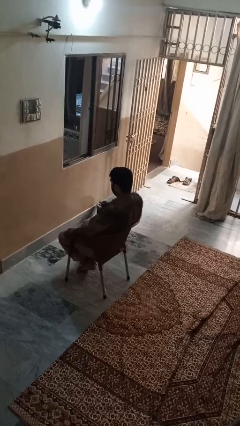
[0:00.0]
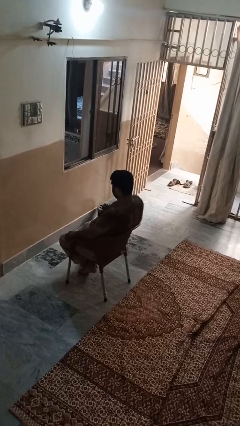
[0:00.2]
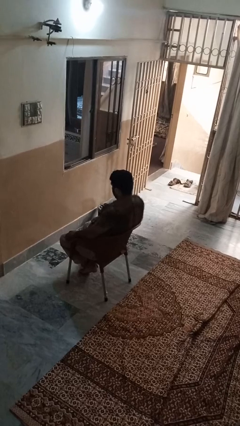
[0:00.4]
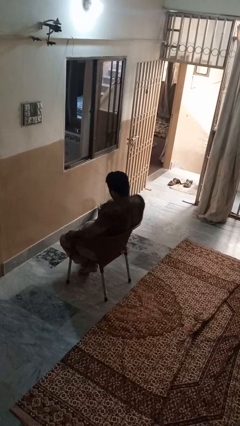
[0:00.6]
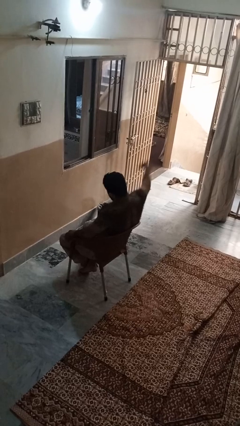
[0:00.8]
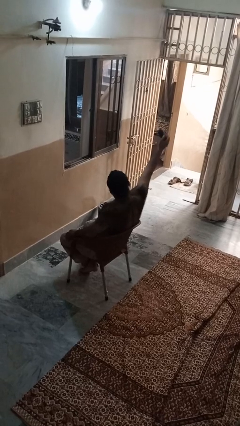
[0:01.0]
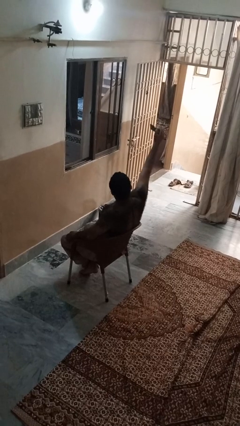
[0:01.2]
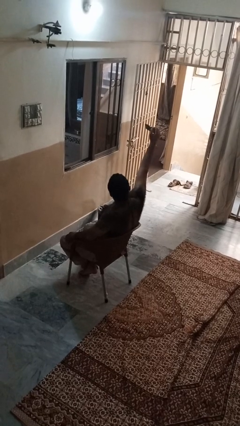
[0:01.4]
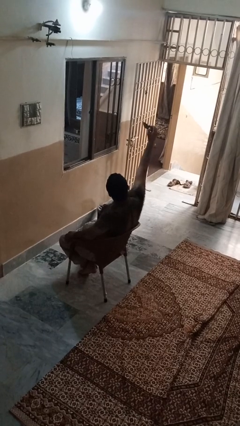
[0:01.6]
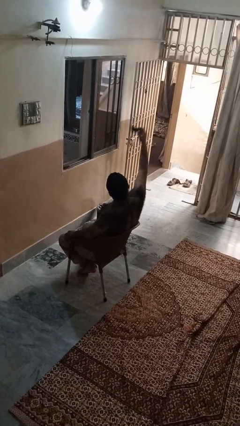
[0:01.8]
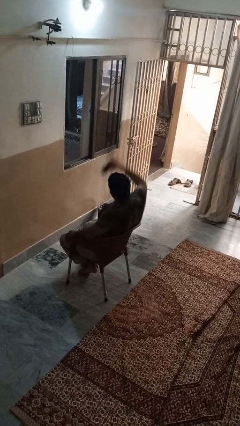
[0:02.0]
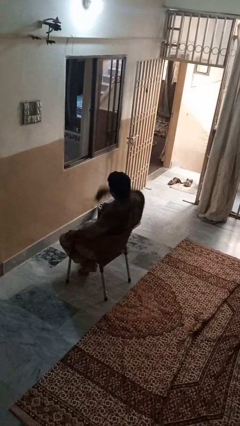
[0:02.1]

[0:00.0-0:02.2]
person takes selfie

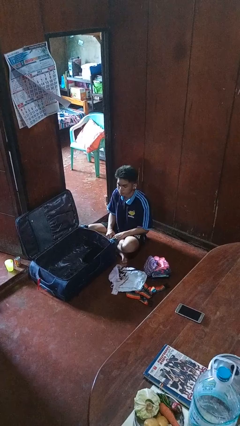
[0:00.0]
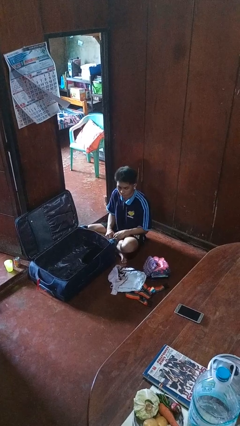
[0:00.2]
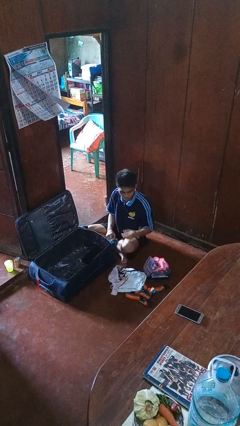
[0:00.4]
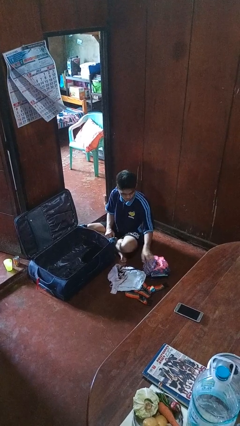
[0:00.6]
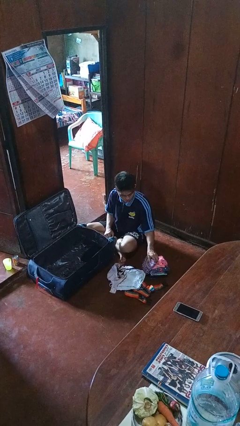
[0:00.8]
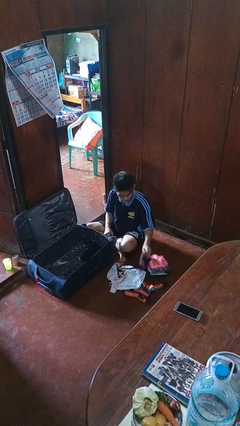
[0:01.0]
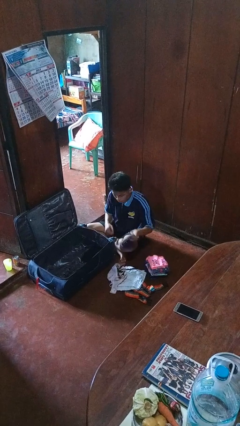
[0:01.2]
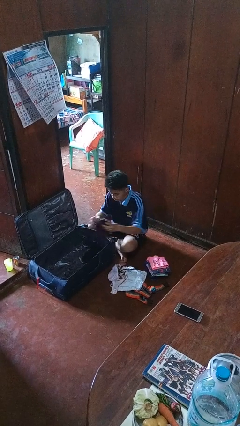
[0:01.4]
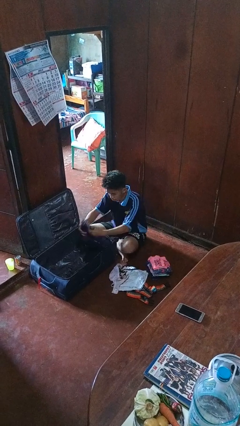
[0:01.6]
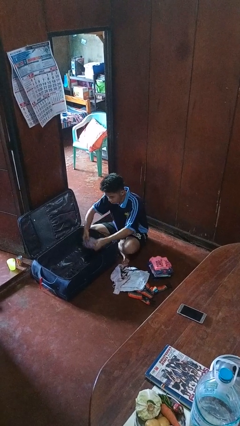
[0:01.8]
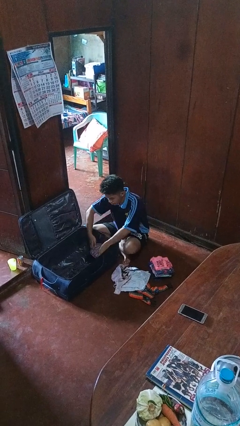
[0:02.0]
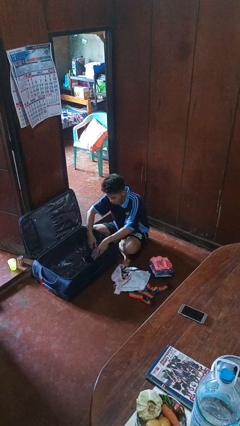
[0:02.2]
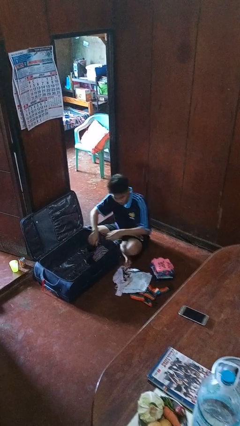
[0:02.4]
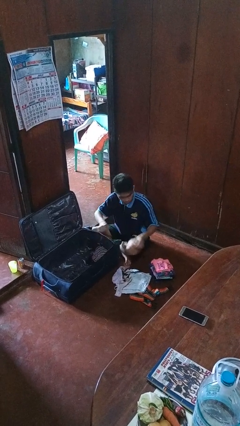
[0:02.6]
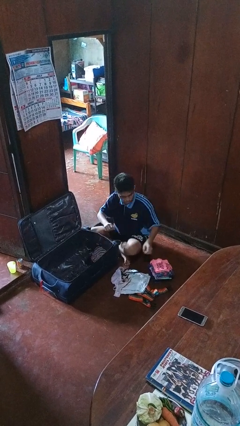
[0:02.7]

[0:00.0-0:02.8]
person loads clothes into suitcase

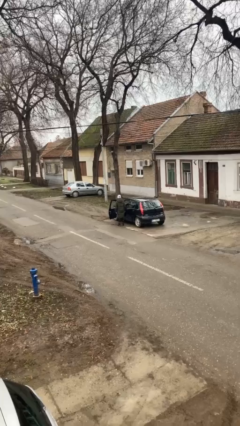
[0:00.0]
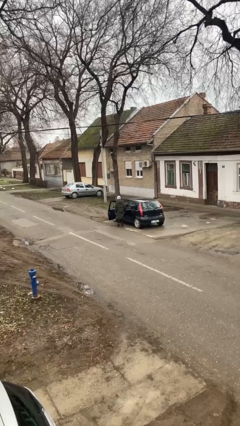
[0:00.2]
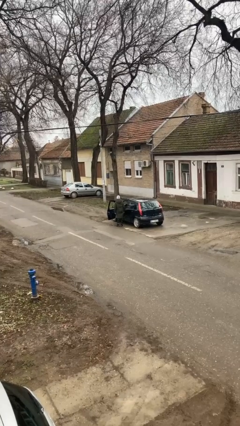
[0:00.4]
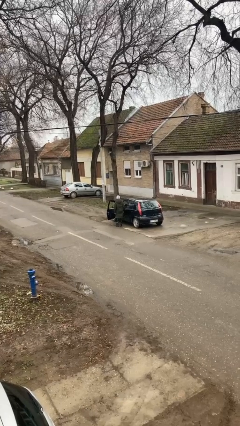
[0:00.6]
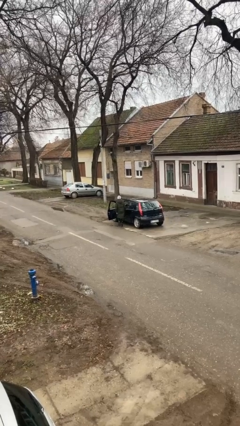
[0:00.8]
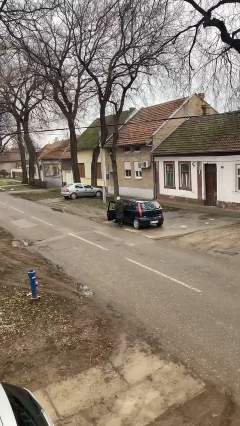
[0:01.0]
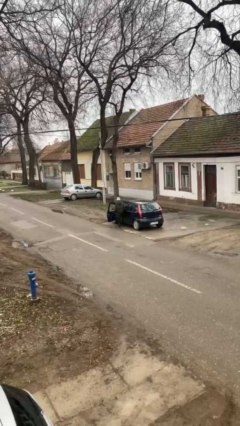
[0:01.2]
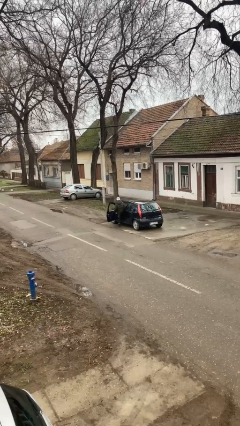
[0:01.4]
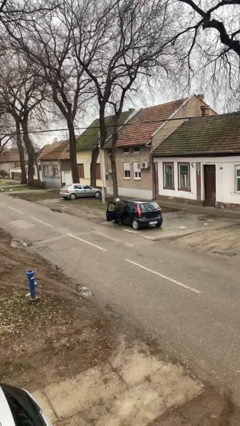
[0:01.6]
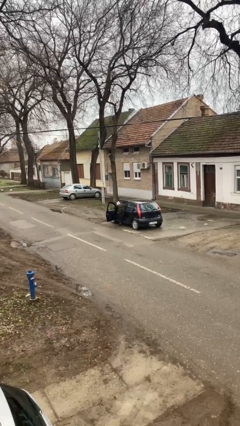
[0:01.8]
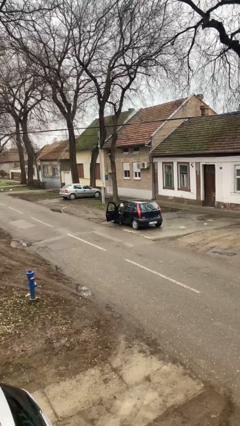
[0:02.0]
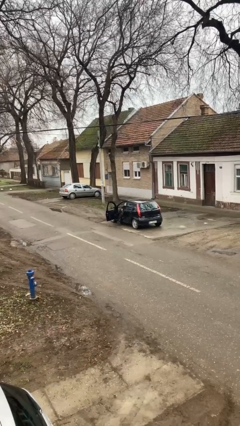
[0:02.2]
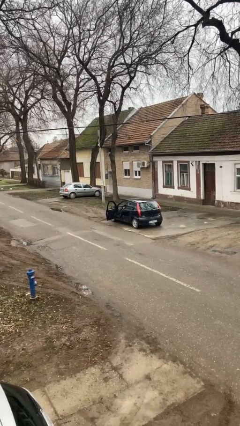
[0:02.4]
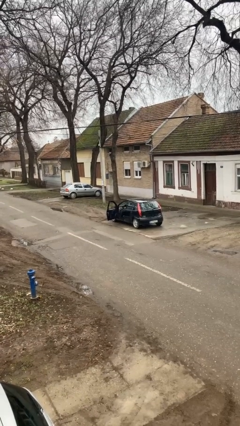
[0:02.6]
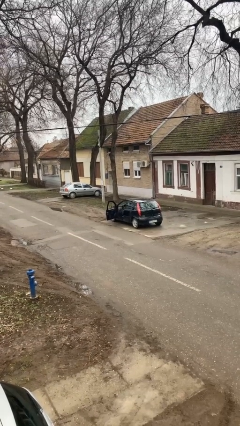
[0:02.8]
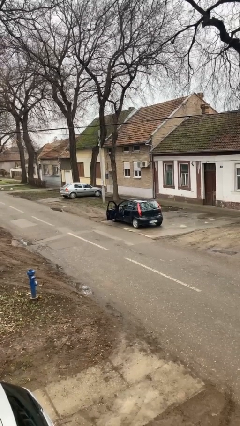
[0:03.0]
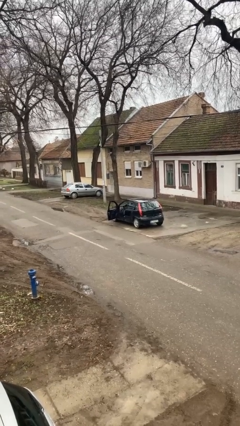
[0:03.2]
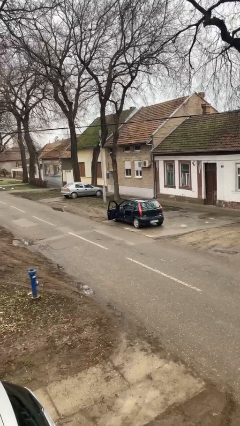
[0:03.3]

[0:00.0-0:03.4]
person enters car

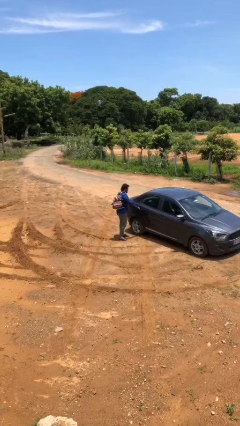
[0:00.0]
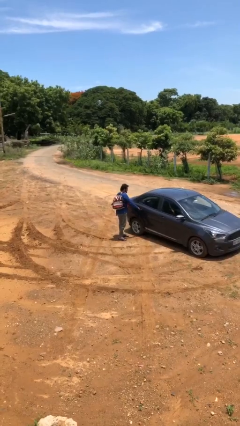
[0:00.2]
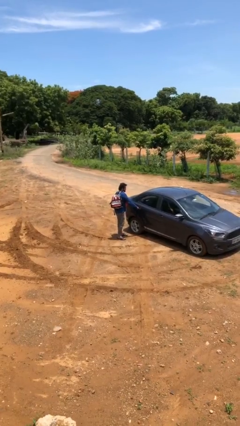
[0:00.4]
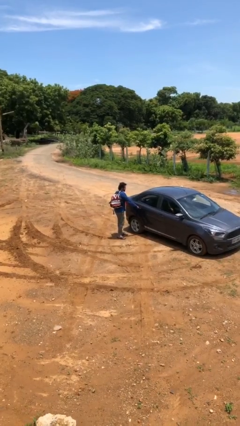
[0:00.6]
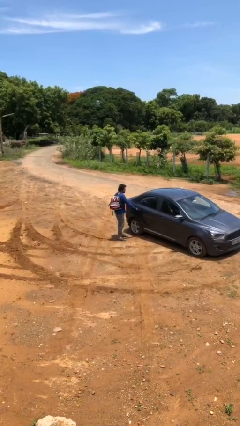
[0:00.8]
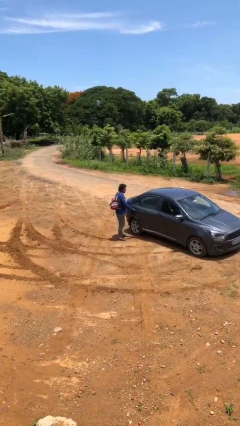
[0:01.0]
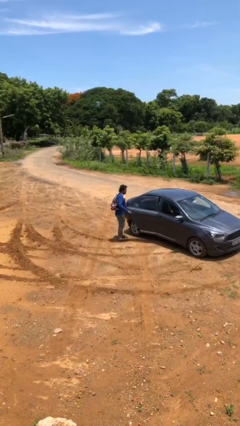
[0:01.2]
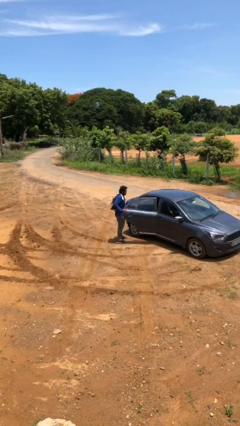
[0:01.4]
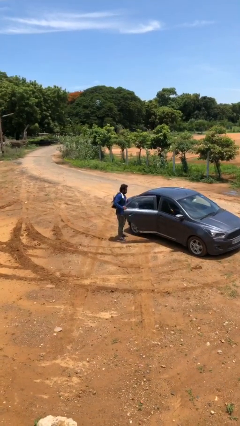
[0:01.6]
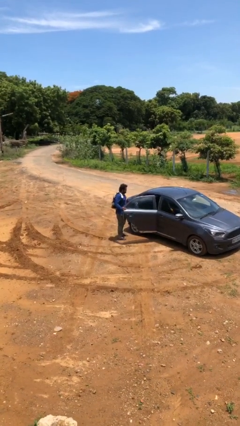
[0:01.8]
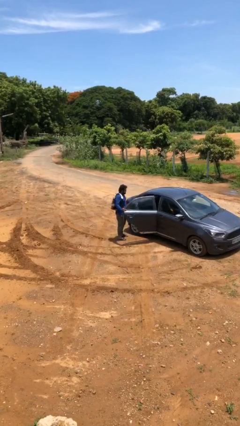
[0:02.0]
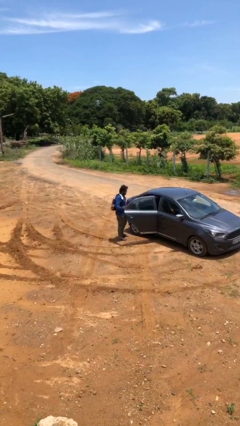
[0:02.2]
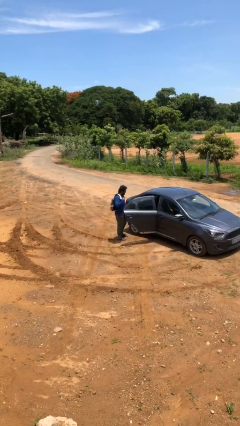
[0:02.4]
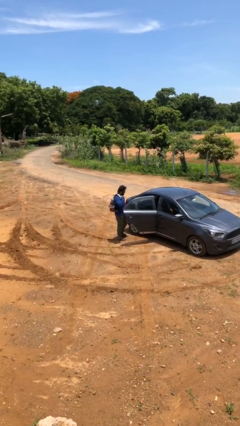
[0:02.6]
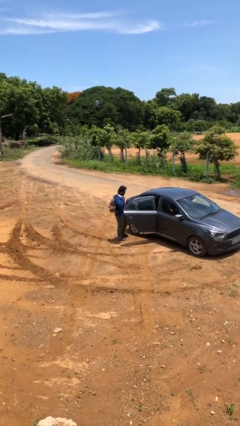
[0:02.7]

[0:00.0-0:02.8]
person opens car door

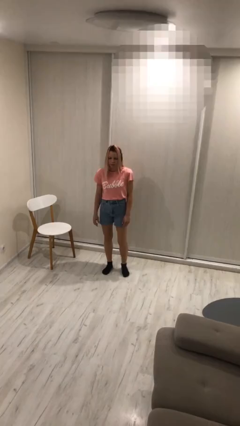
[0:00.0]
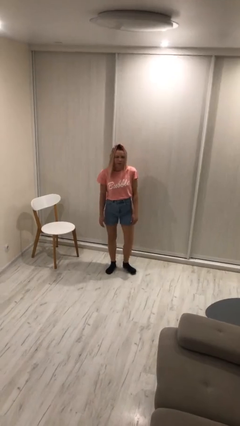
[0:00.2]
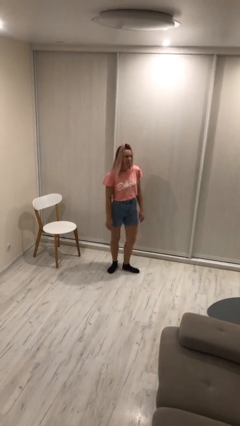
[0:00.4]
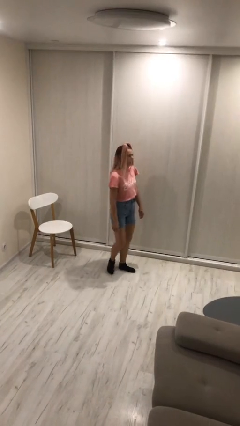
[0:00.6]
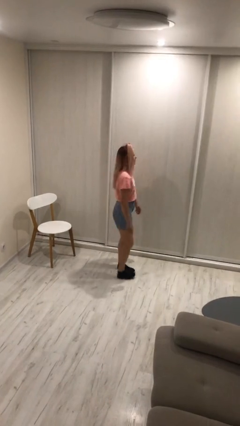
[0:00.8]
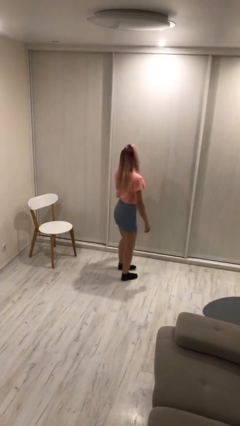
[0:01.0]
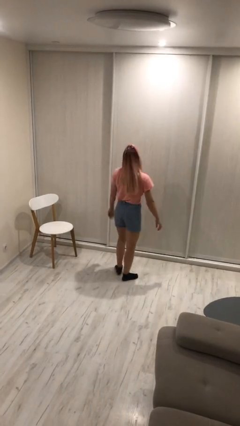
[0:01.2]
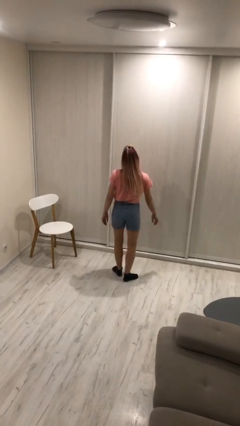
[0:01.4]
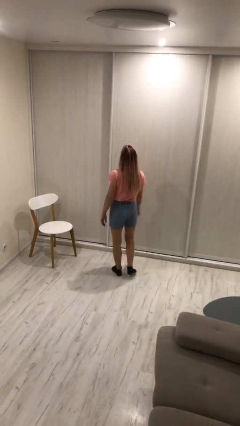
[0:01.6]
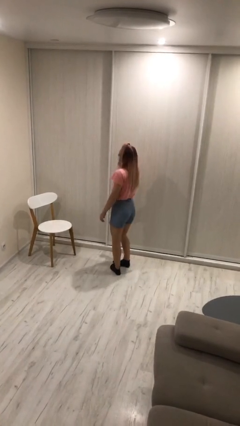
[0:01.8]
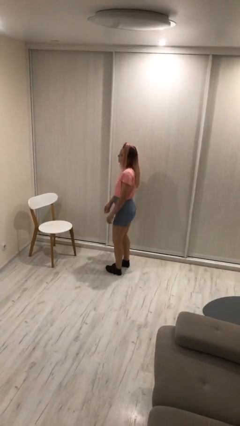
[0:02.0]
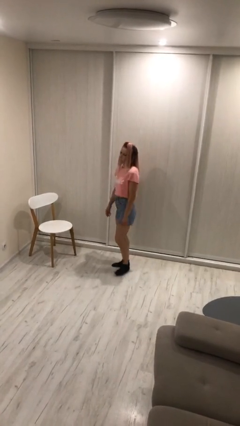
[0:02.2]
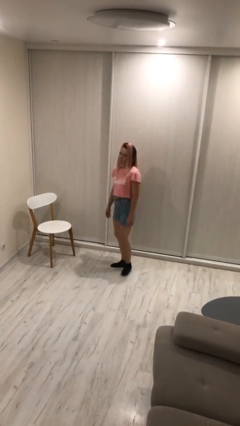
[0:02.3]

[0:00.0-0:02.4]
person twirls

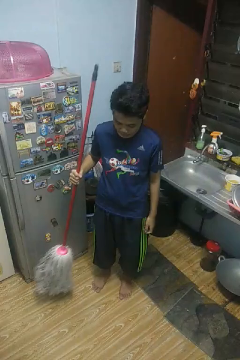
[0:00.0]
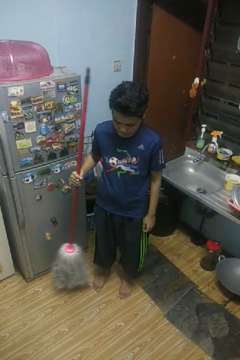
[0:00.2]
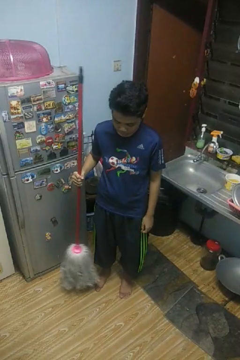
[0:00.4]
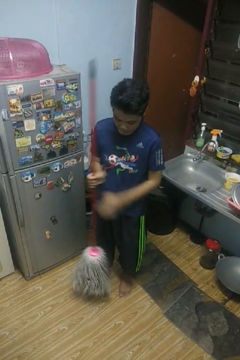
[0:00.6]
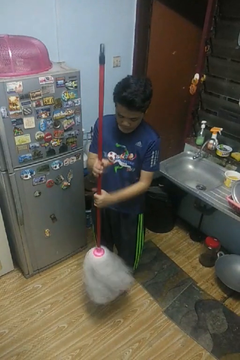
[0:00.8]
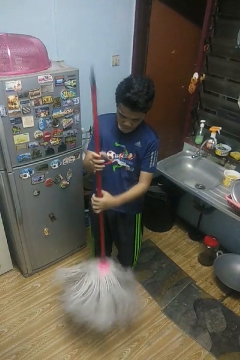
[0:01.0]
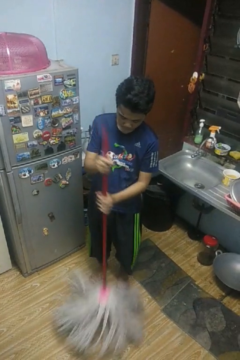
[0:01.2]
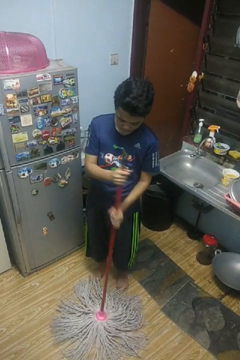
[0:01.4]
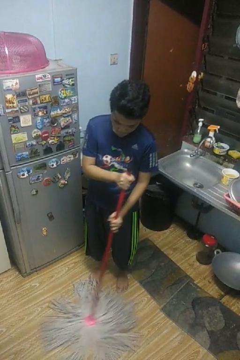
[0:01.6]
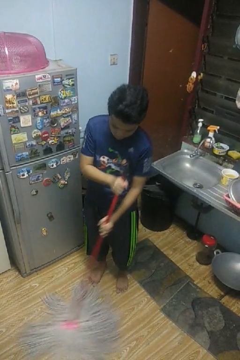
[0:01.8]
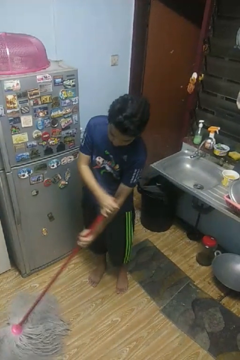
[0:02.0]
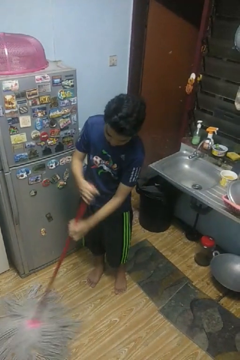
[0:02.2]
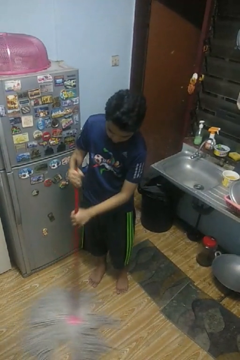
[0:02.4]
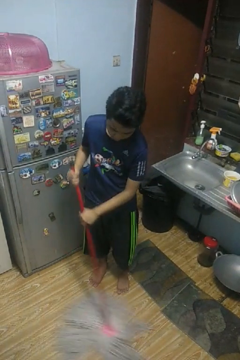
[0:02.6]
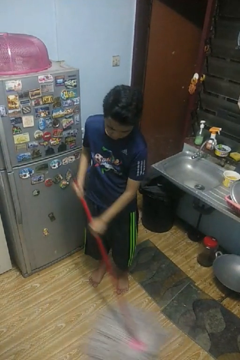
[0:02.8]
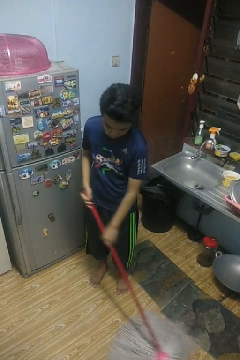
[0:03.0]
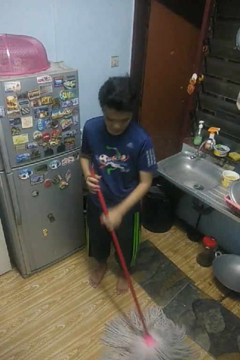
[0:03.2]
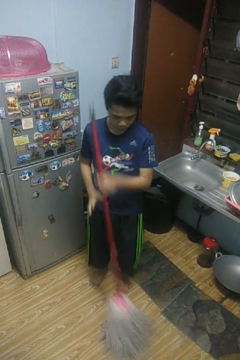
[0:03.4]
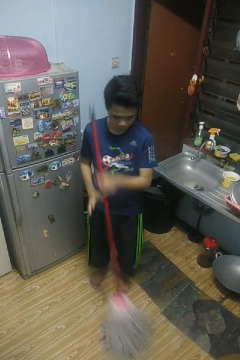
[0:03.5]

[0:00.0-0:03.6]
person mops

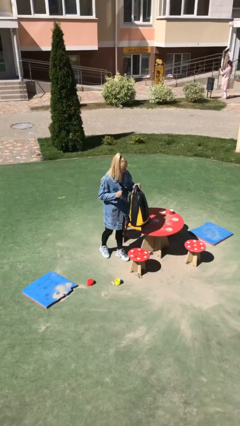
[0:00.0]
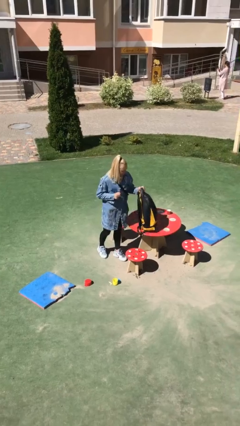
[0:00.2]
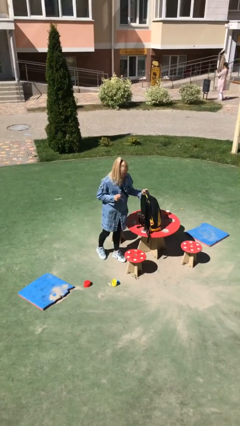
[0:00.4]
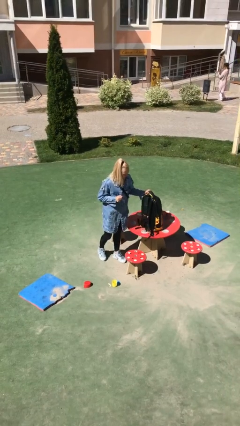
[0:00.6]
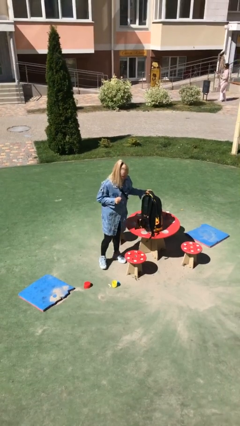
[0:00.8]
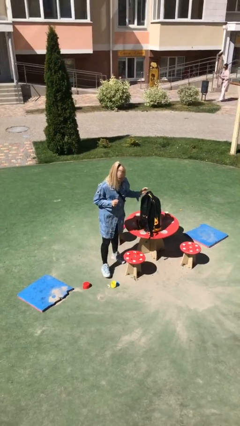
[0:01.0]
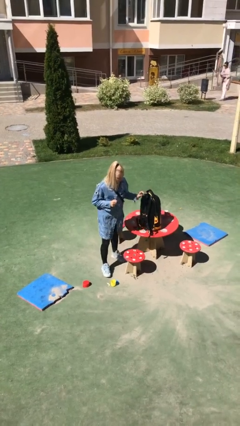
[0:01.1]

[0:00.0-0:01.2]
person puts down object on table
